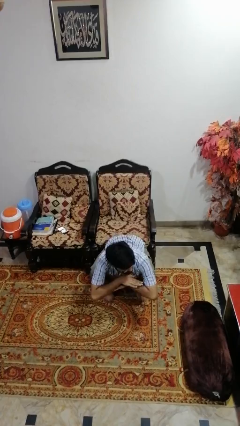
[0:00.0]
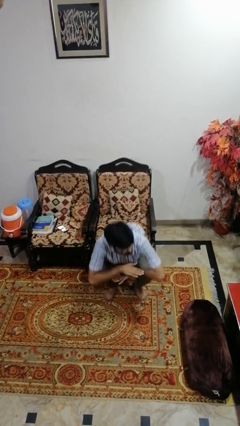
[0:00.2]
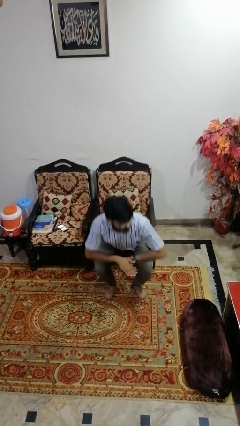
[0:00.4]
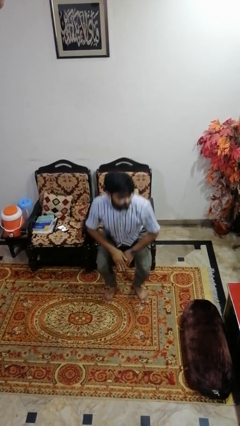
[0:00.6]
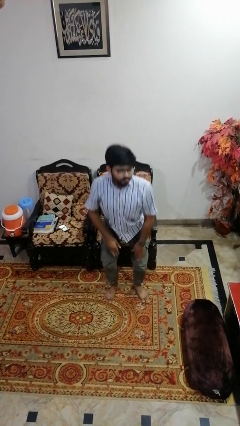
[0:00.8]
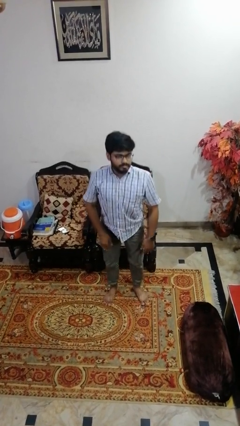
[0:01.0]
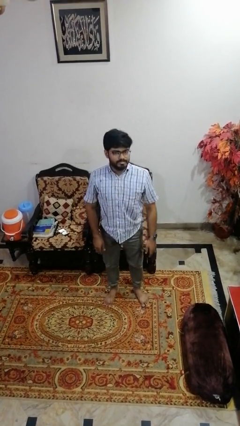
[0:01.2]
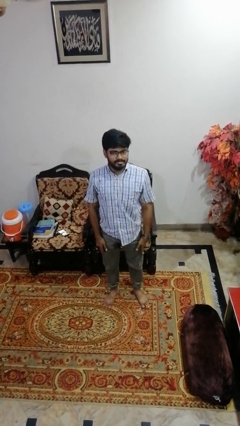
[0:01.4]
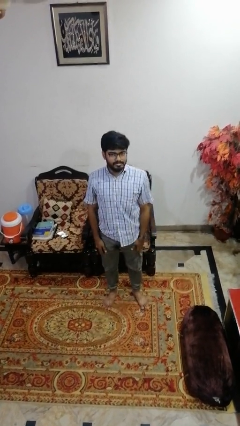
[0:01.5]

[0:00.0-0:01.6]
person stands up

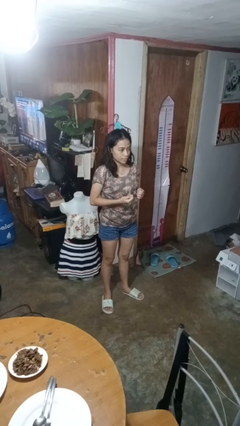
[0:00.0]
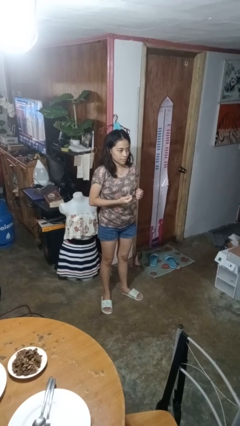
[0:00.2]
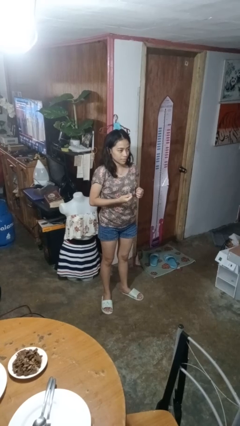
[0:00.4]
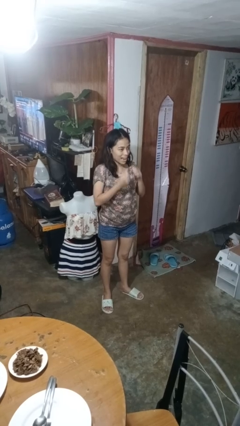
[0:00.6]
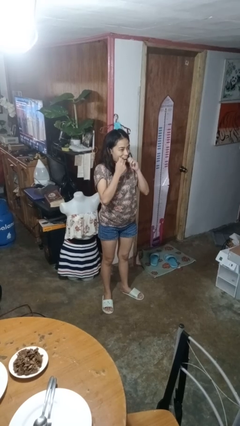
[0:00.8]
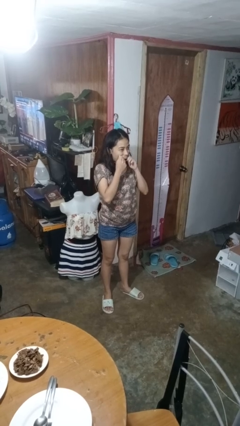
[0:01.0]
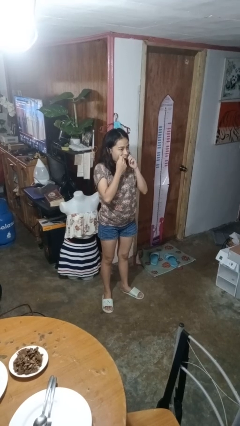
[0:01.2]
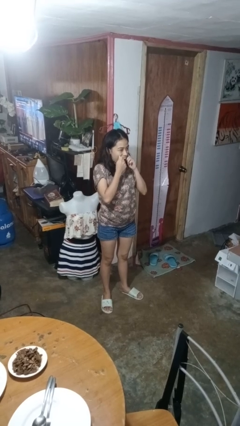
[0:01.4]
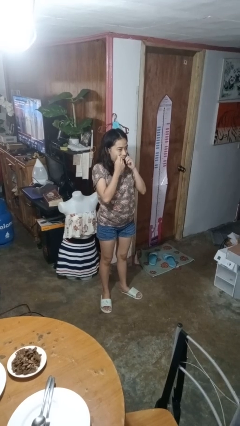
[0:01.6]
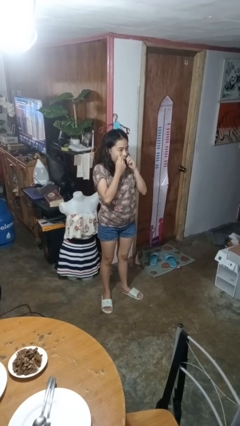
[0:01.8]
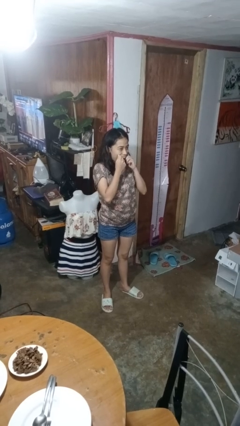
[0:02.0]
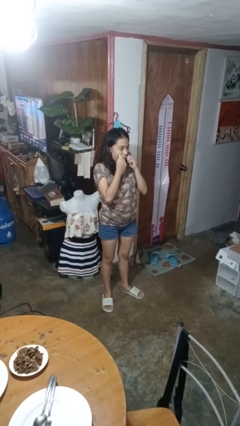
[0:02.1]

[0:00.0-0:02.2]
person flosses

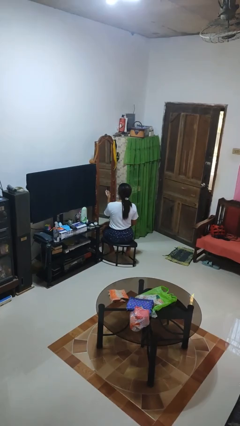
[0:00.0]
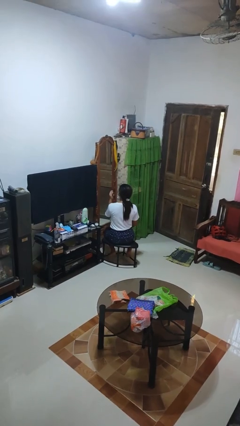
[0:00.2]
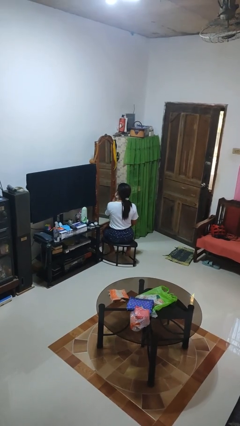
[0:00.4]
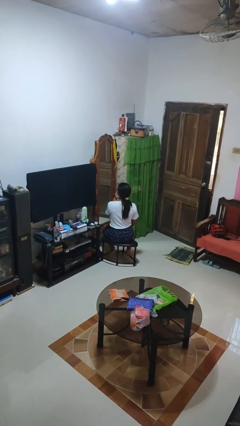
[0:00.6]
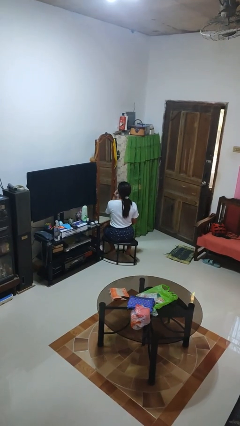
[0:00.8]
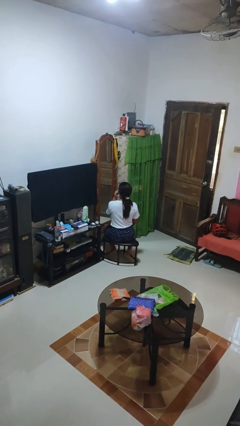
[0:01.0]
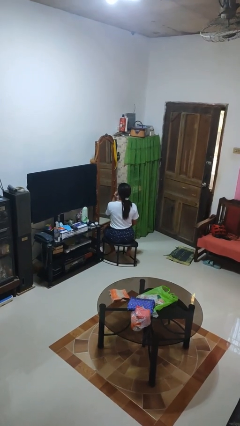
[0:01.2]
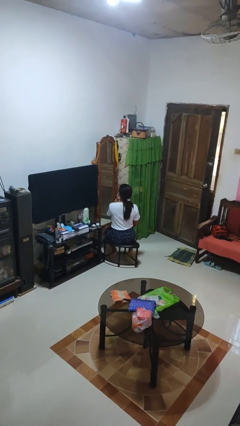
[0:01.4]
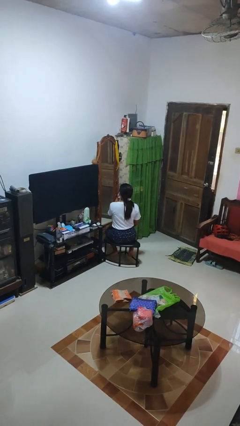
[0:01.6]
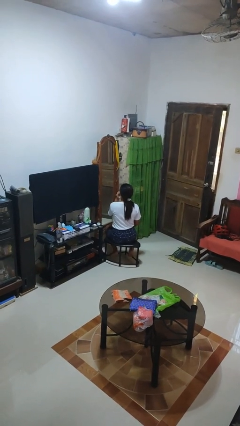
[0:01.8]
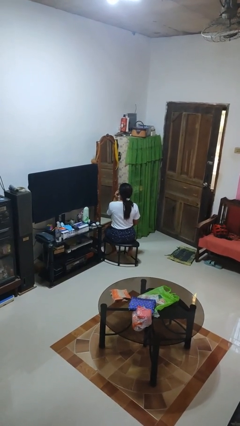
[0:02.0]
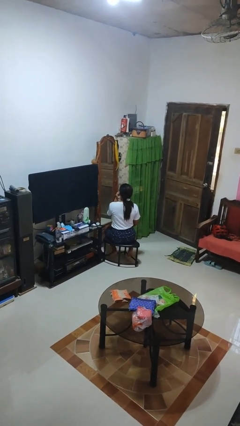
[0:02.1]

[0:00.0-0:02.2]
person applies lip makeup

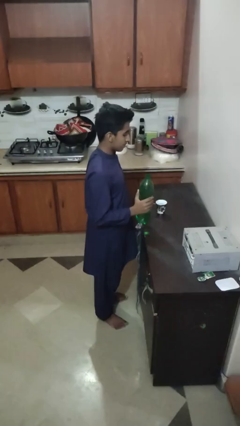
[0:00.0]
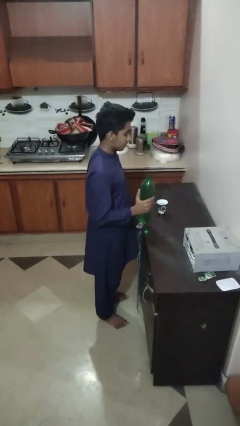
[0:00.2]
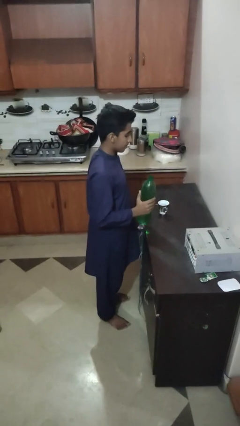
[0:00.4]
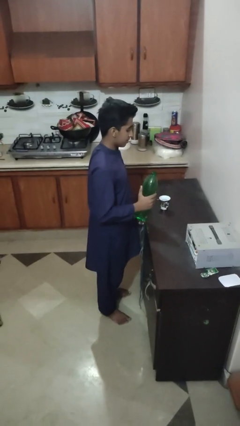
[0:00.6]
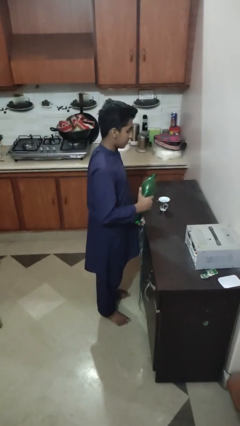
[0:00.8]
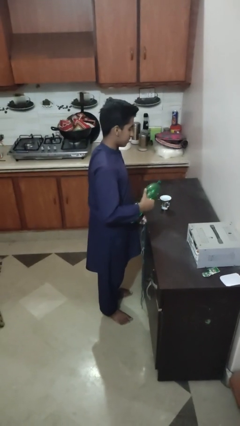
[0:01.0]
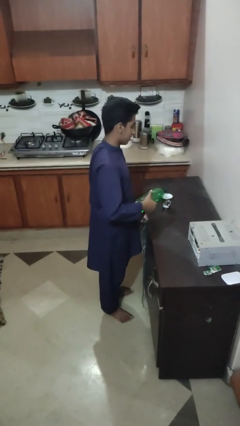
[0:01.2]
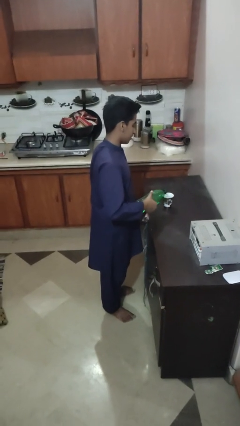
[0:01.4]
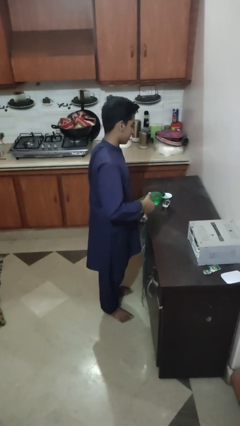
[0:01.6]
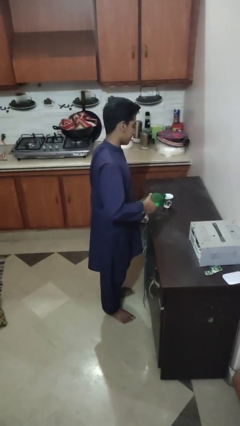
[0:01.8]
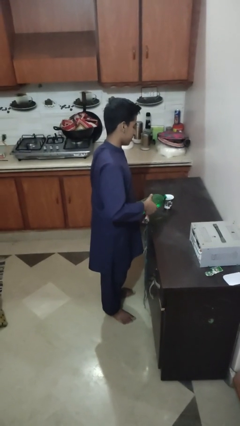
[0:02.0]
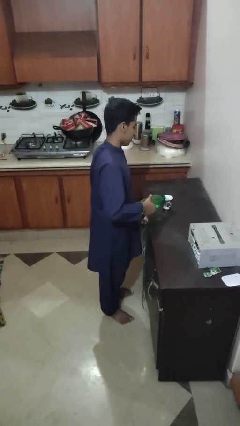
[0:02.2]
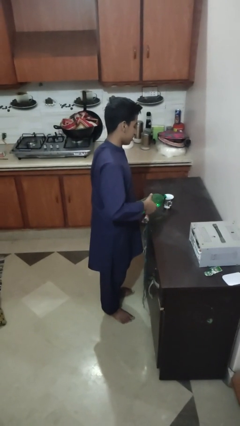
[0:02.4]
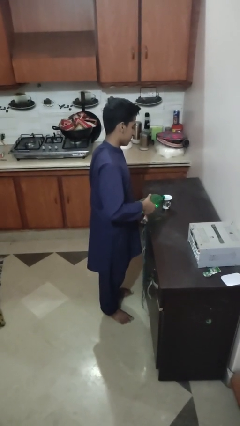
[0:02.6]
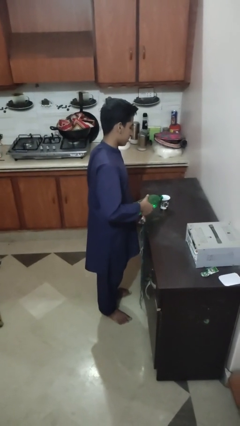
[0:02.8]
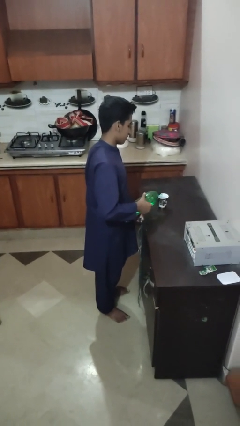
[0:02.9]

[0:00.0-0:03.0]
person pours liquid into cup

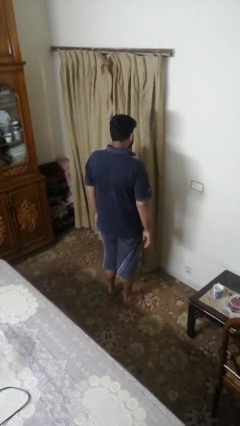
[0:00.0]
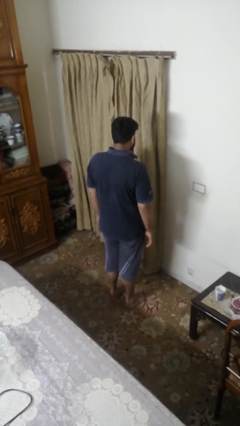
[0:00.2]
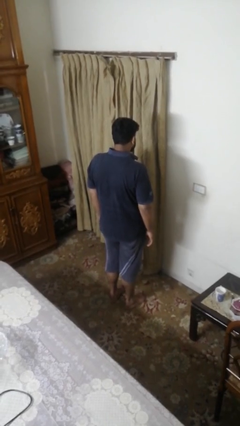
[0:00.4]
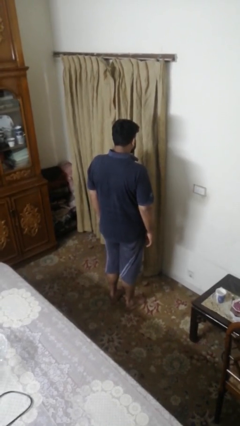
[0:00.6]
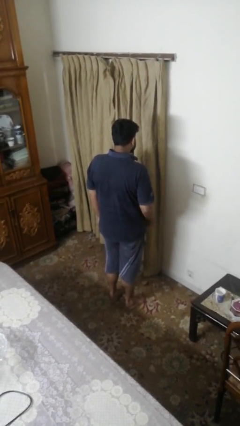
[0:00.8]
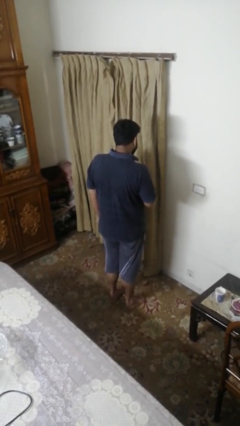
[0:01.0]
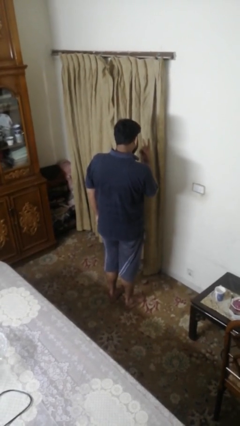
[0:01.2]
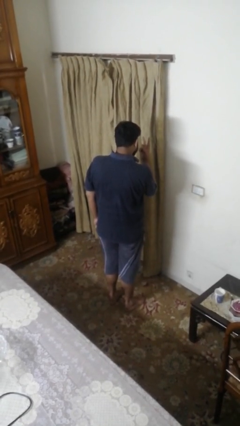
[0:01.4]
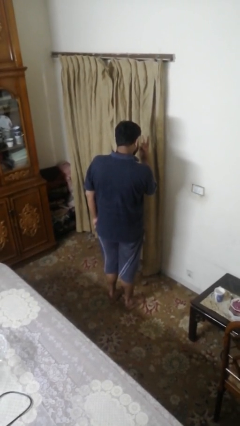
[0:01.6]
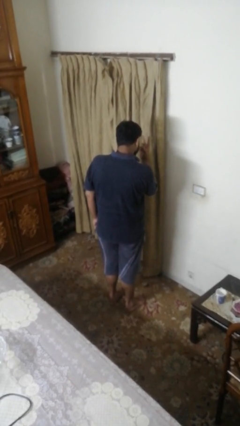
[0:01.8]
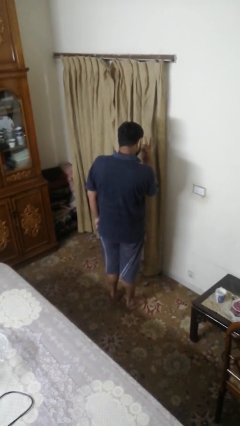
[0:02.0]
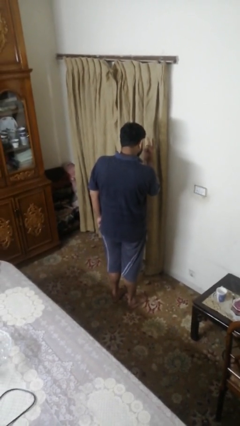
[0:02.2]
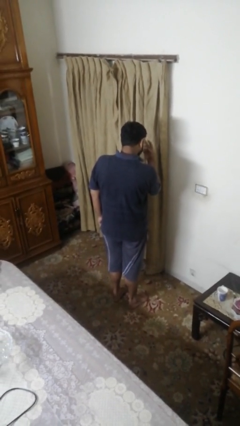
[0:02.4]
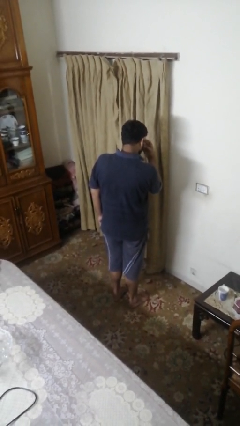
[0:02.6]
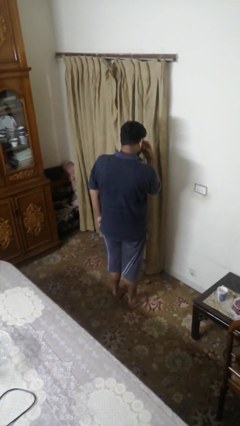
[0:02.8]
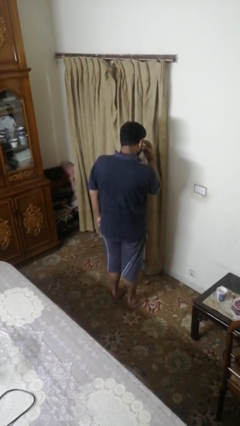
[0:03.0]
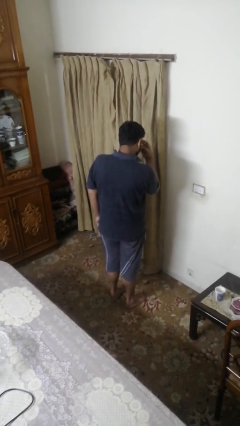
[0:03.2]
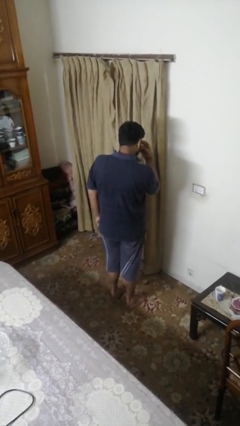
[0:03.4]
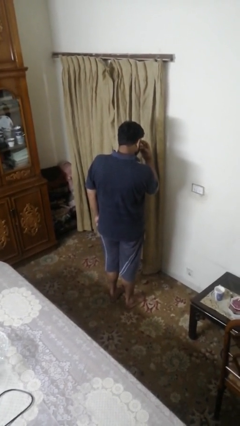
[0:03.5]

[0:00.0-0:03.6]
person gestures watch closely

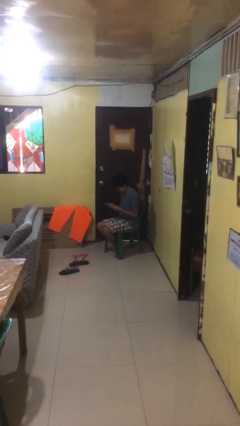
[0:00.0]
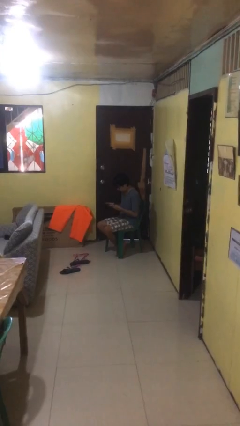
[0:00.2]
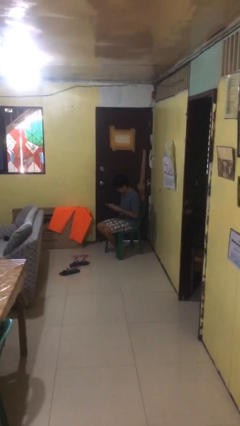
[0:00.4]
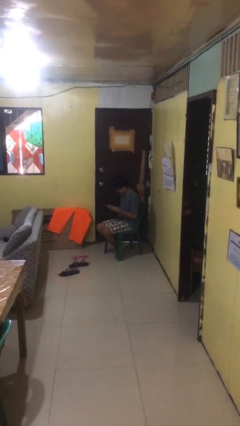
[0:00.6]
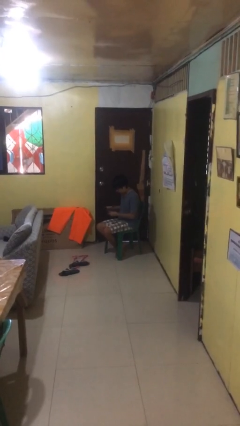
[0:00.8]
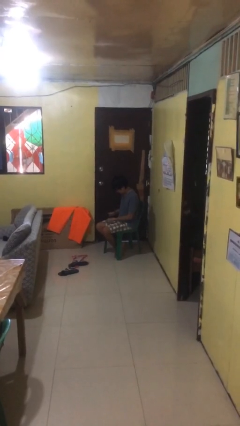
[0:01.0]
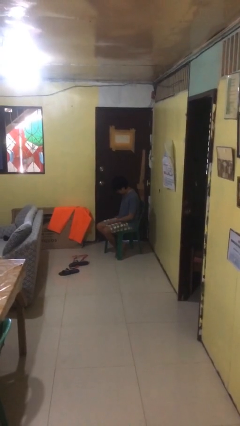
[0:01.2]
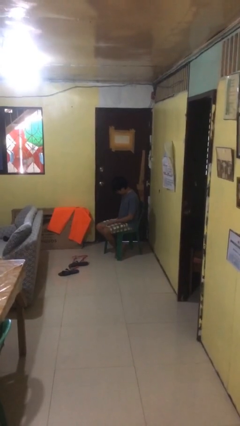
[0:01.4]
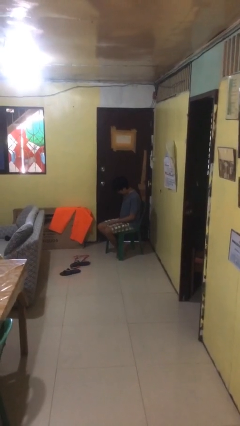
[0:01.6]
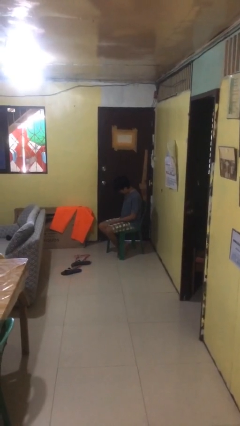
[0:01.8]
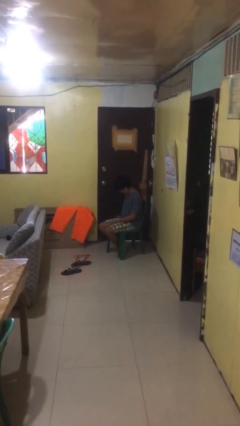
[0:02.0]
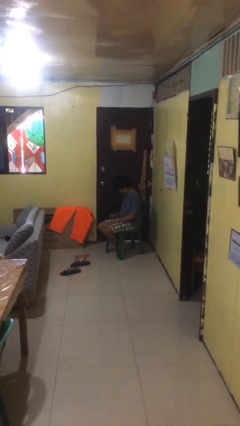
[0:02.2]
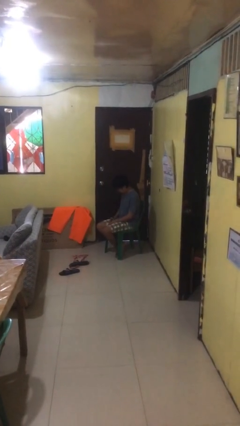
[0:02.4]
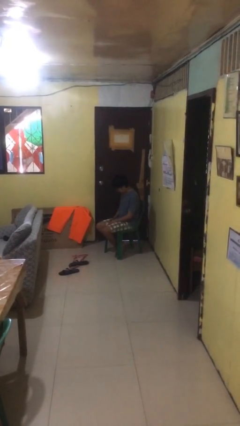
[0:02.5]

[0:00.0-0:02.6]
person puts phone into pocket

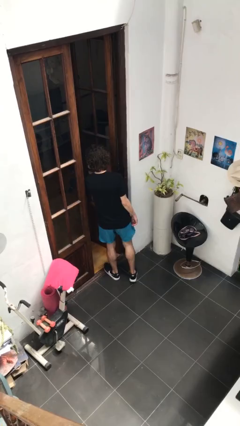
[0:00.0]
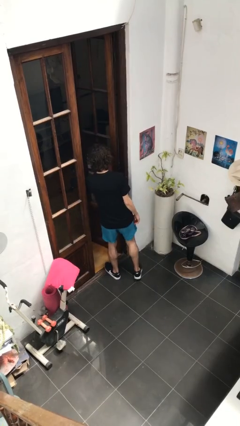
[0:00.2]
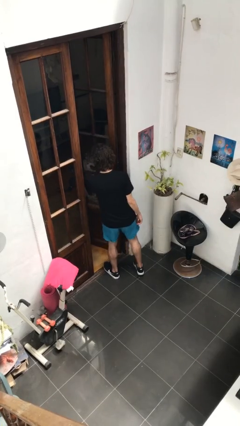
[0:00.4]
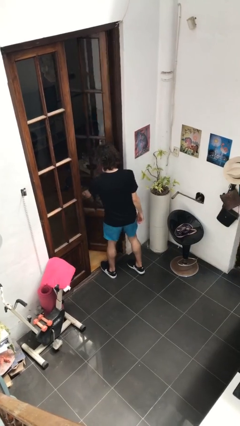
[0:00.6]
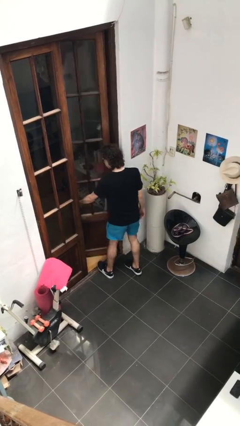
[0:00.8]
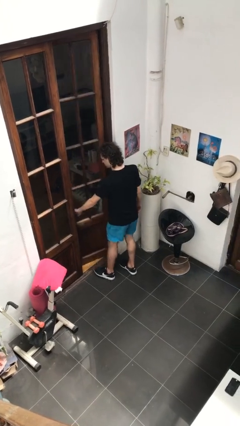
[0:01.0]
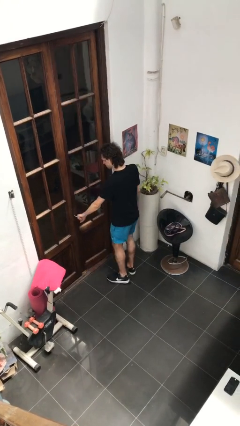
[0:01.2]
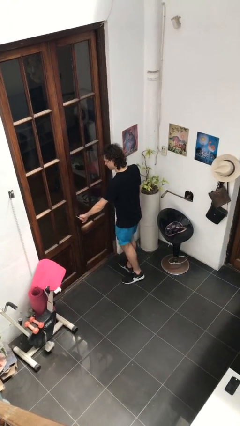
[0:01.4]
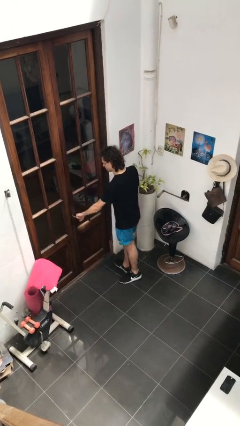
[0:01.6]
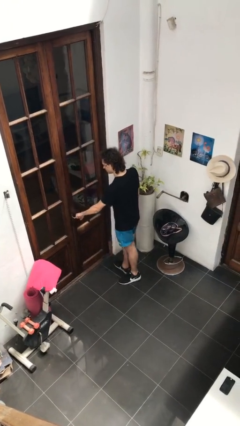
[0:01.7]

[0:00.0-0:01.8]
person closes facility door
